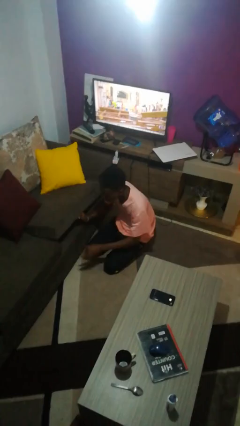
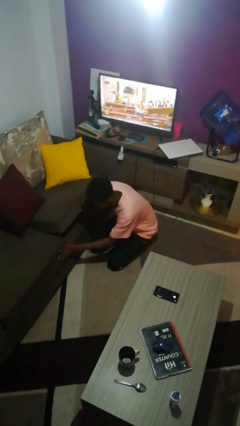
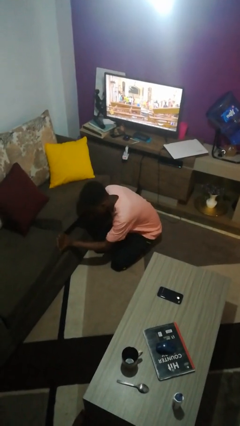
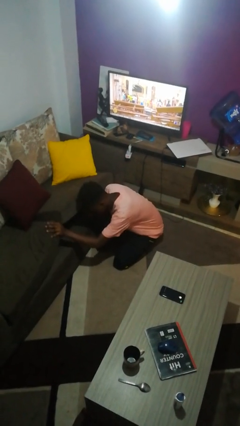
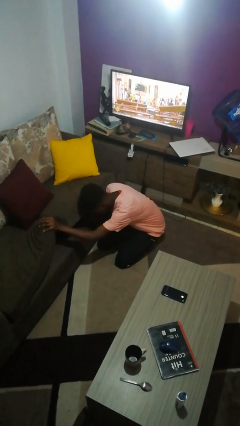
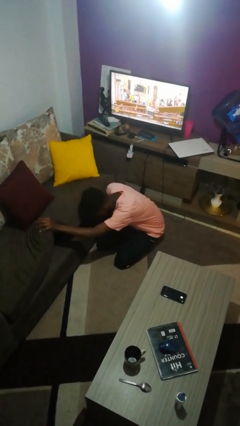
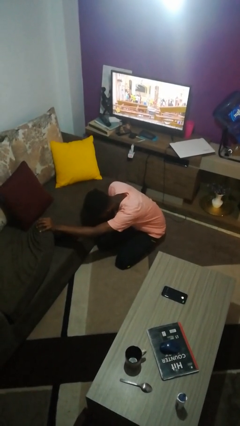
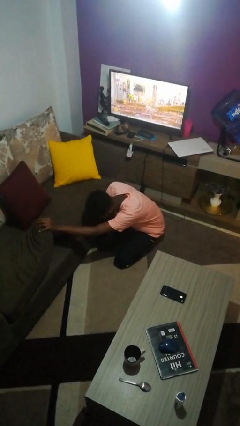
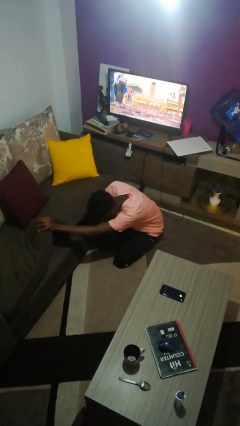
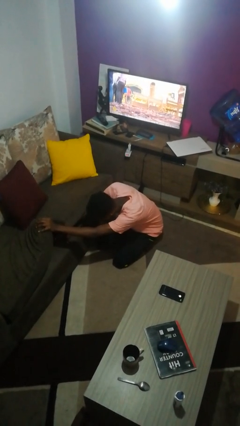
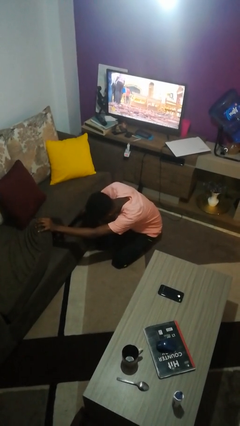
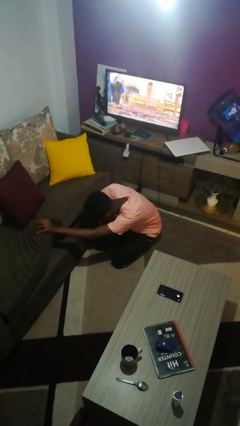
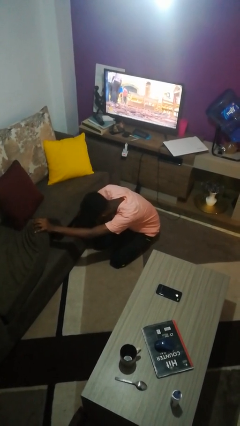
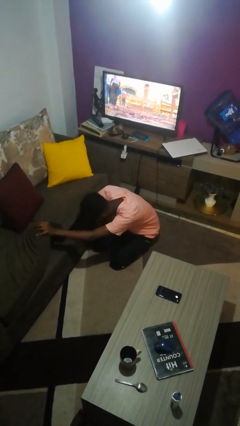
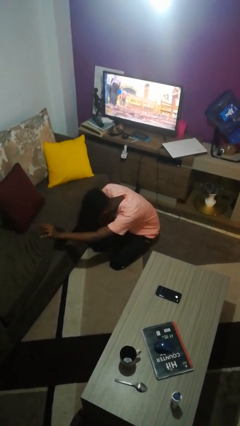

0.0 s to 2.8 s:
person searches under couch

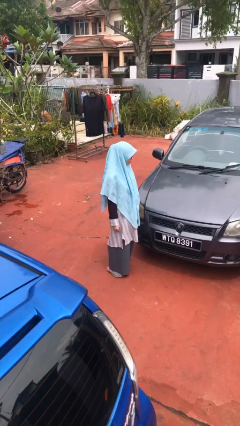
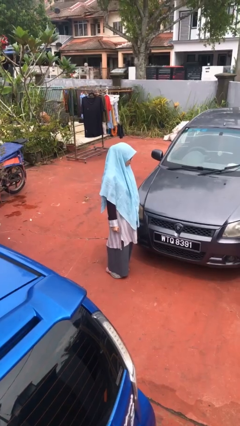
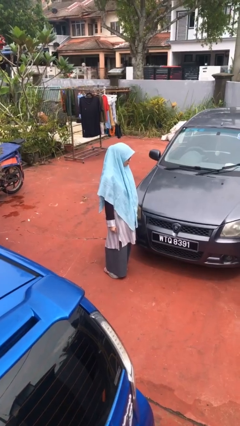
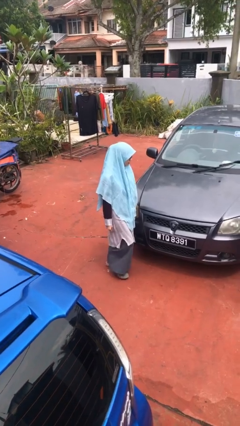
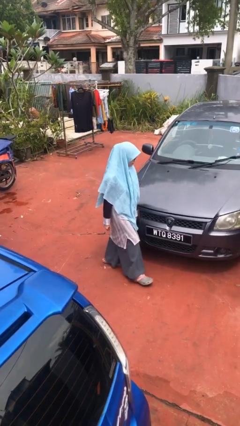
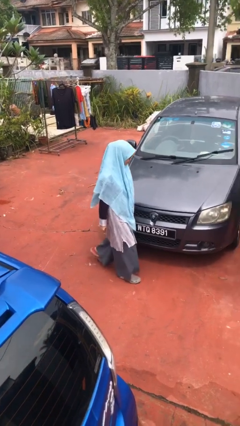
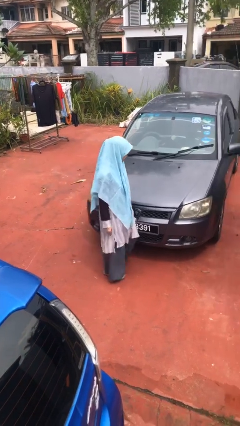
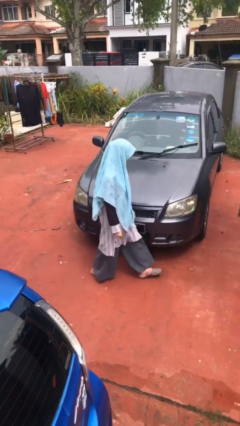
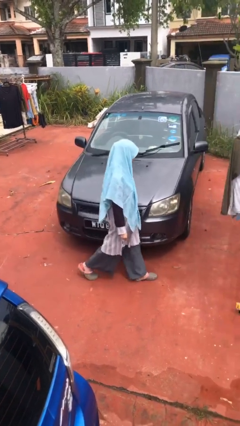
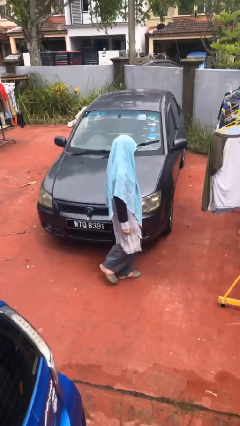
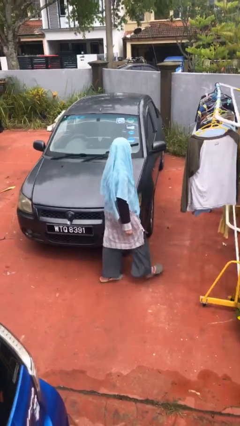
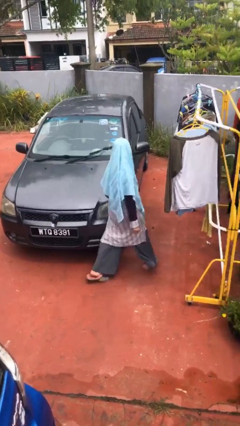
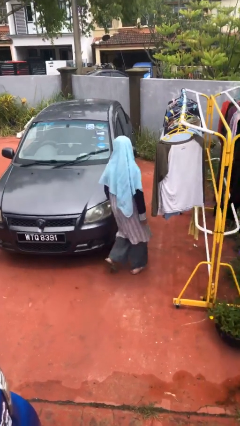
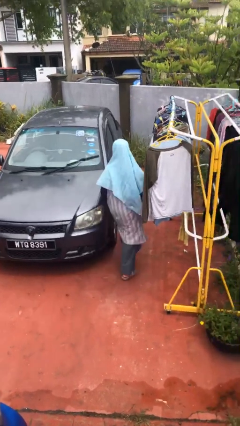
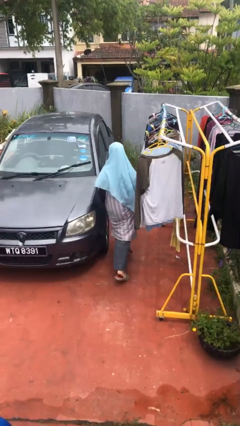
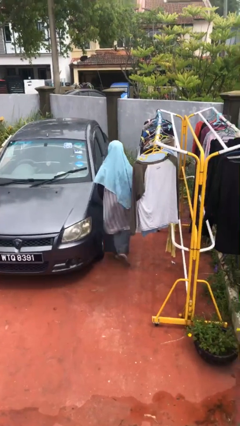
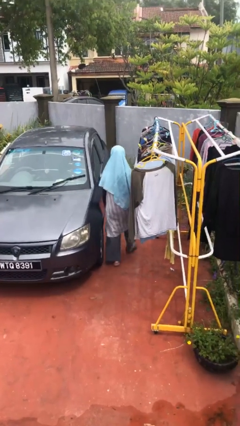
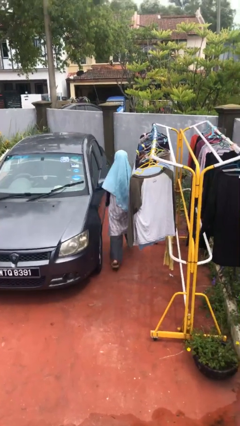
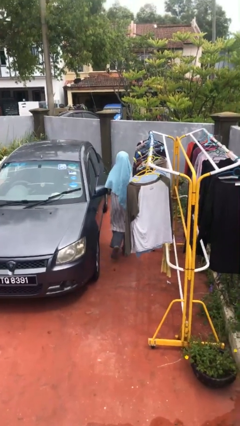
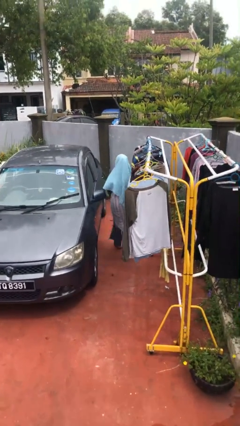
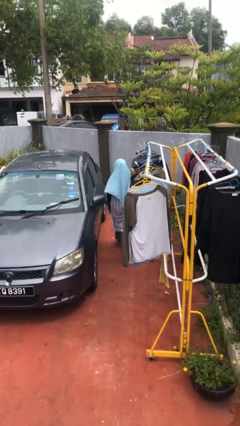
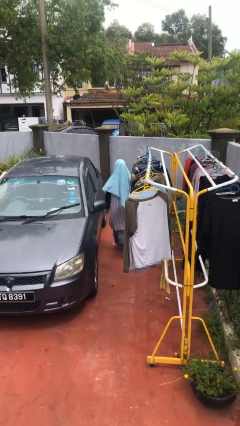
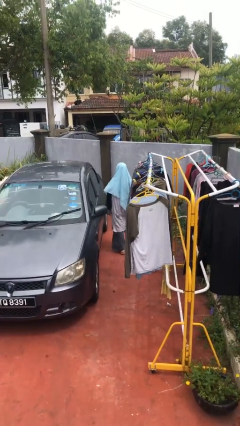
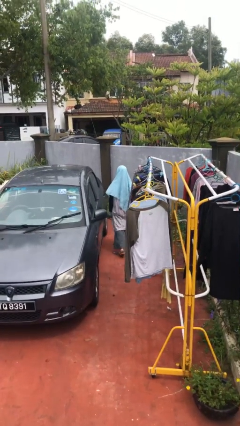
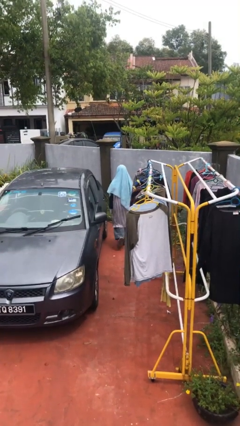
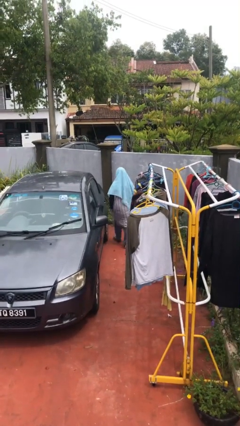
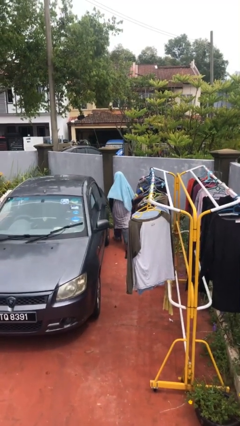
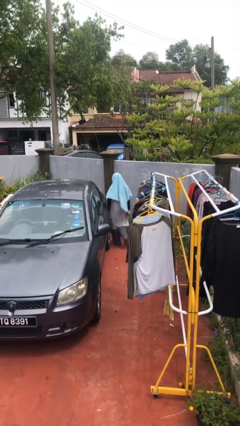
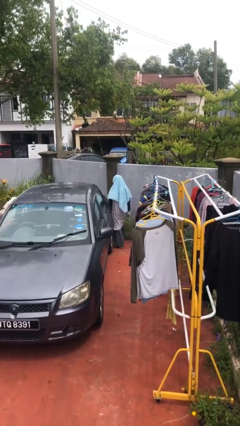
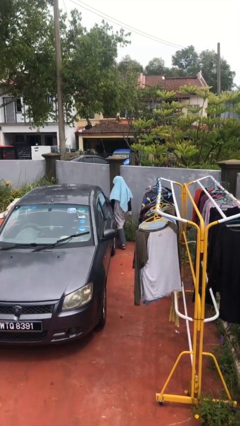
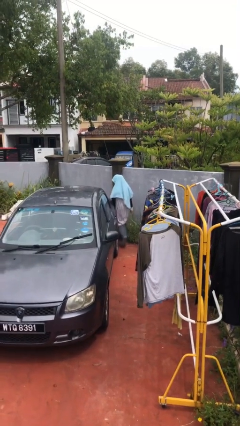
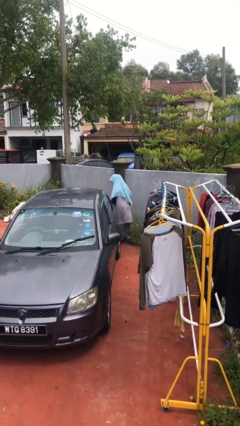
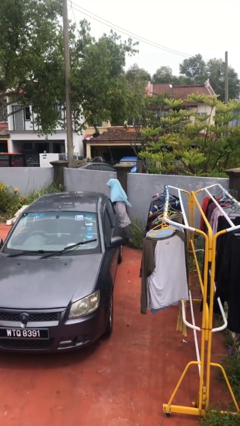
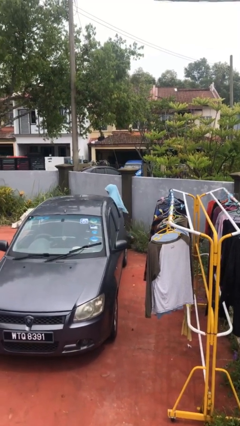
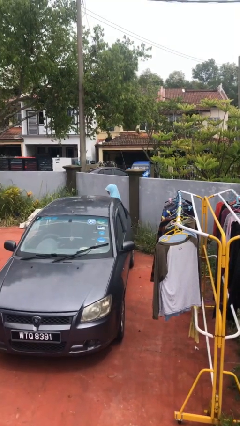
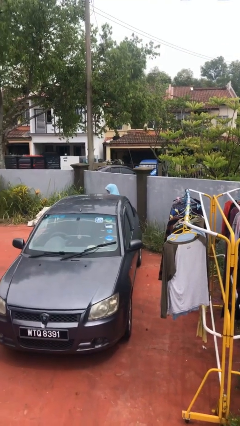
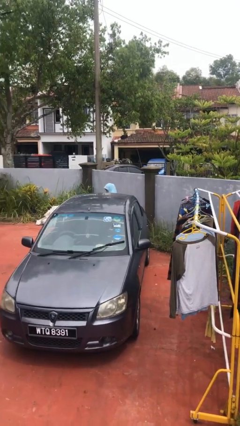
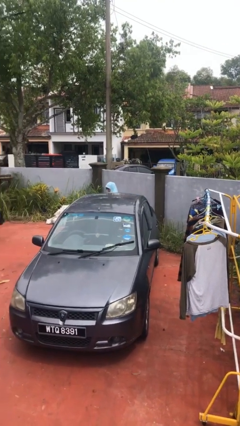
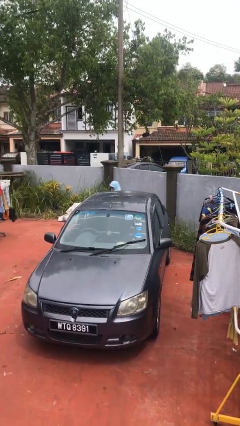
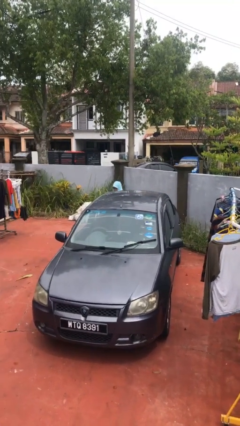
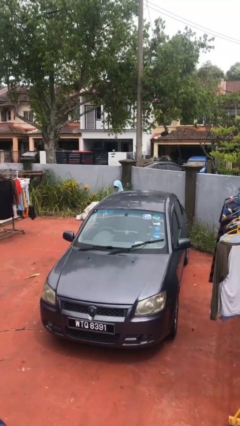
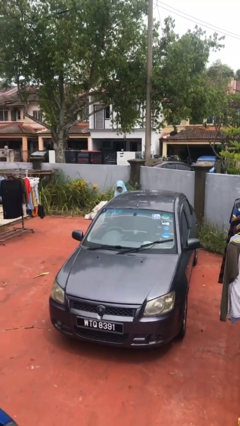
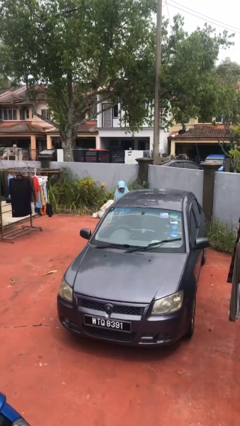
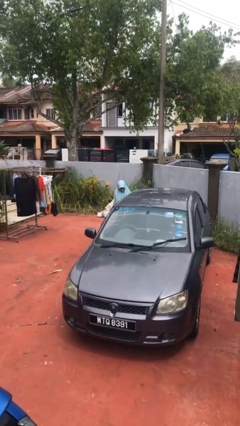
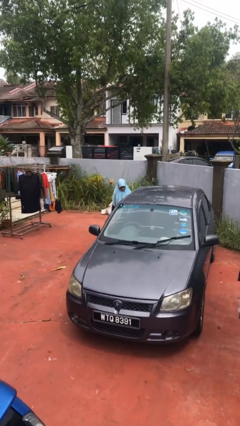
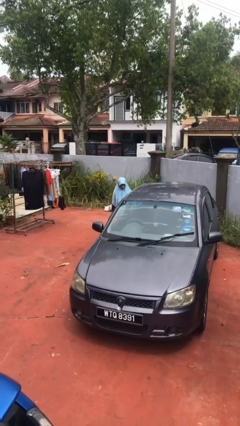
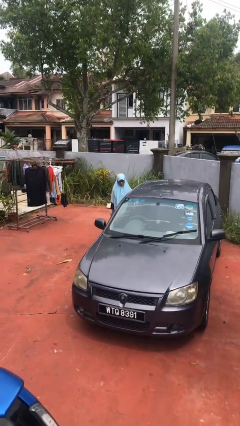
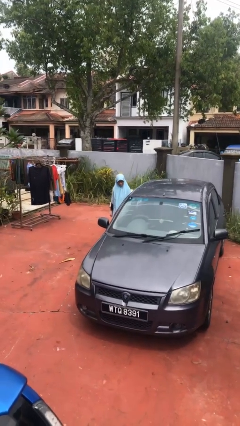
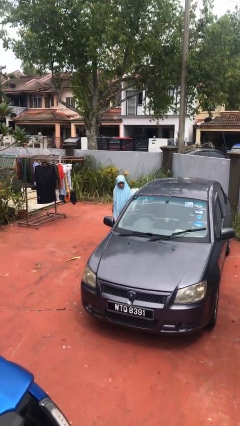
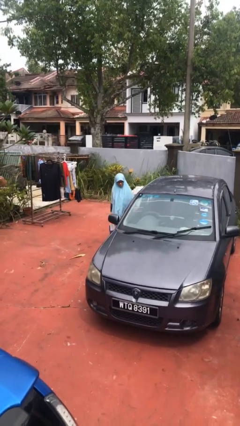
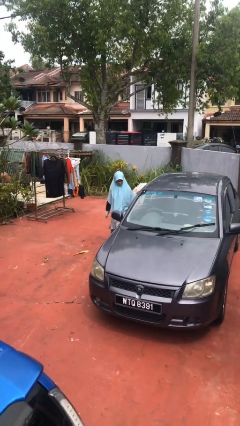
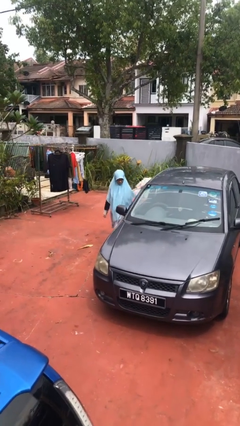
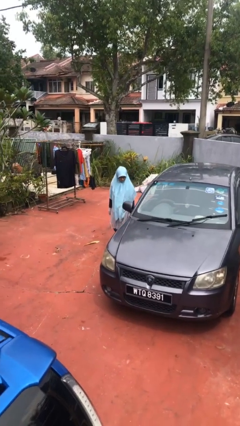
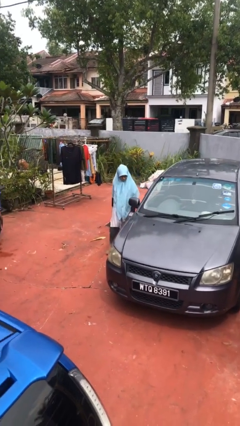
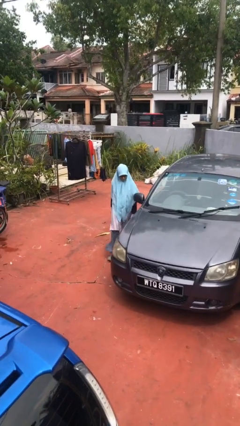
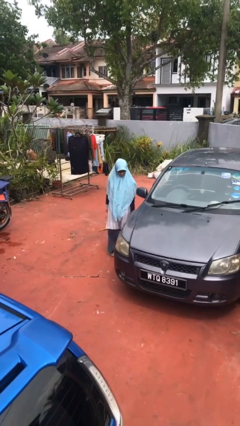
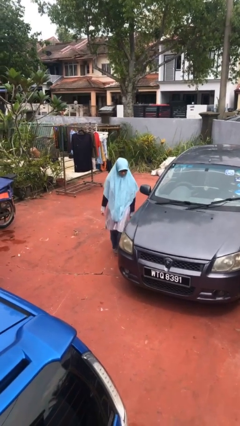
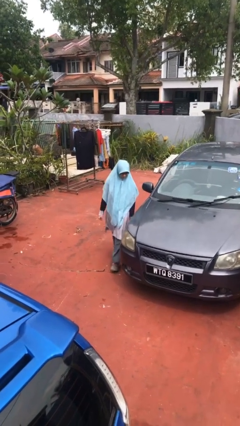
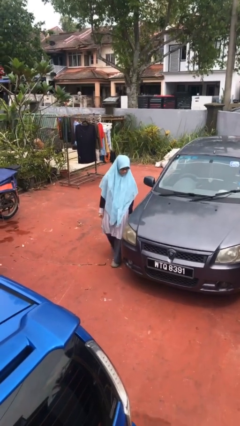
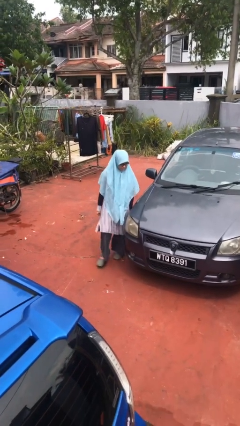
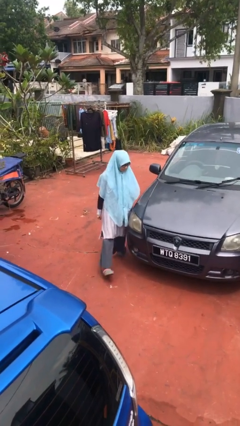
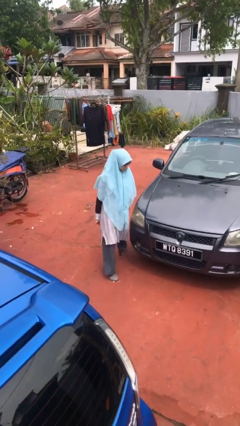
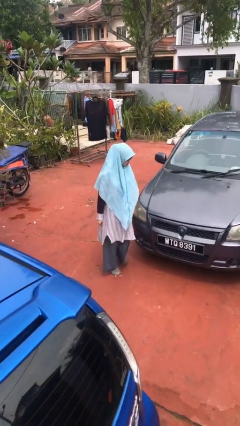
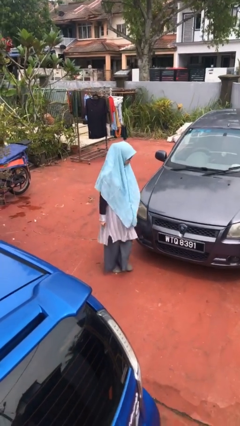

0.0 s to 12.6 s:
person walks around car

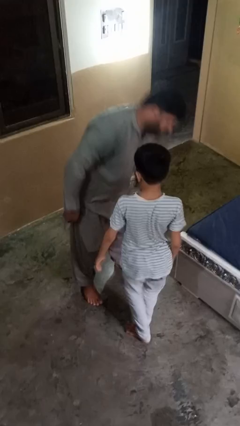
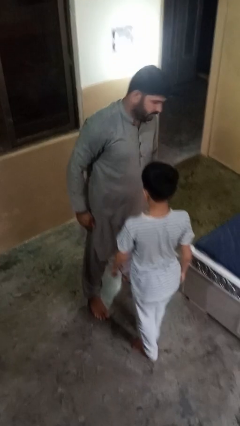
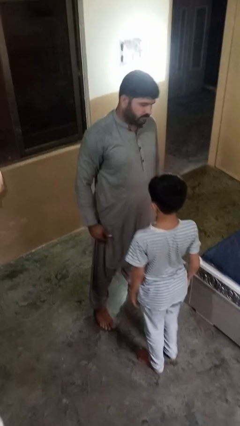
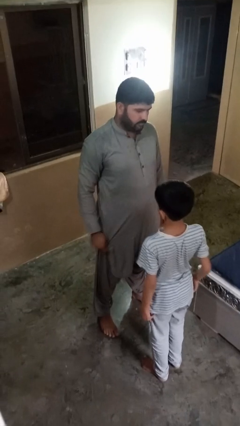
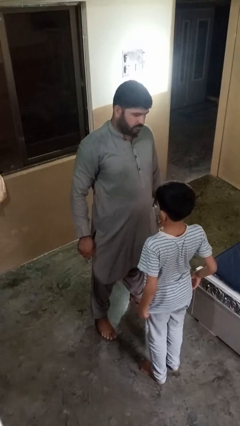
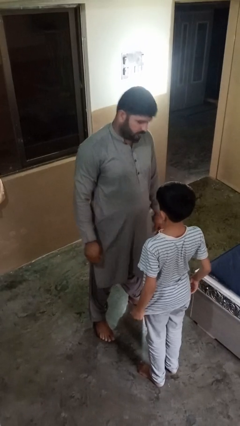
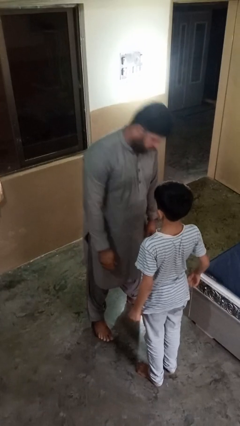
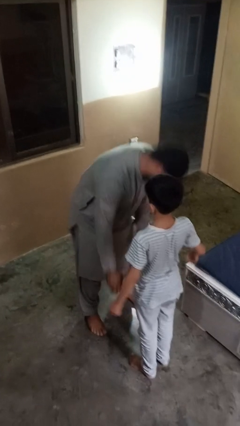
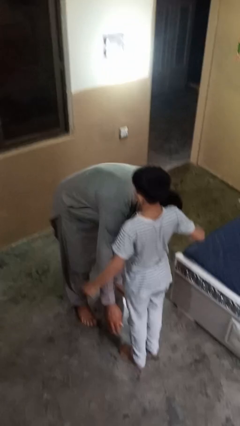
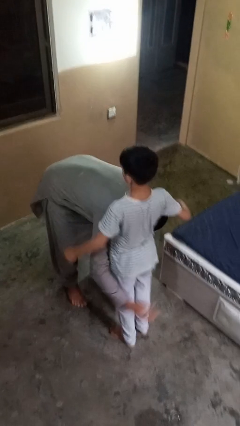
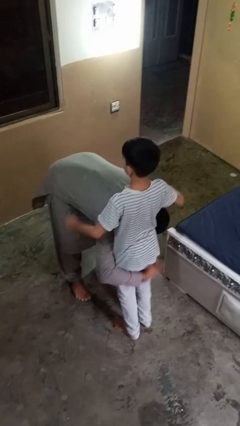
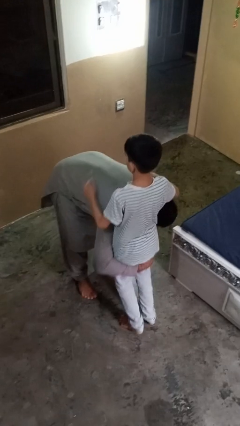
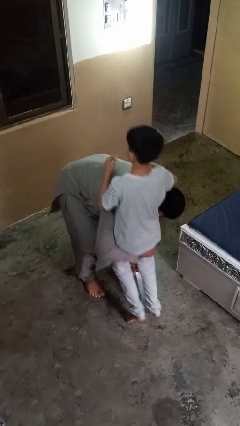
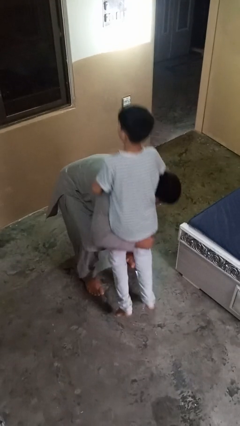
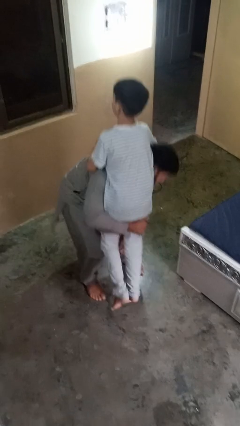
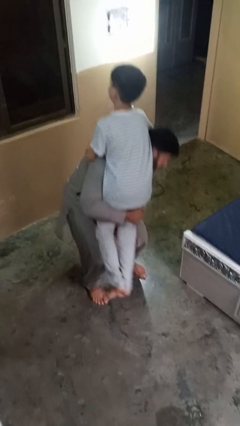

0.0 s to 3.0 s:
person carries person on shoulders
